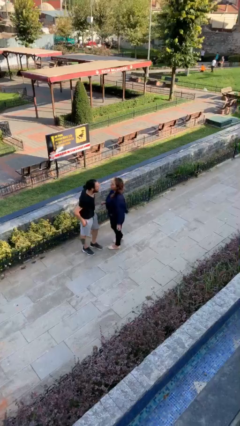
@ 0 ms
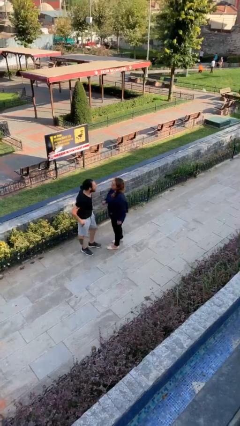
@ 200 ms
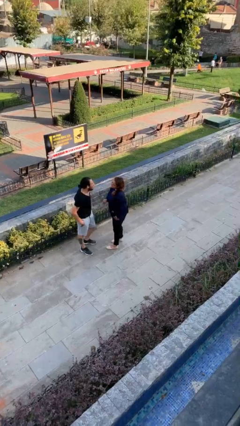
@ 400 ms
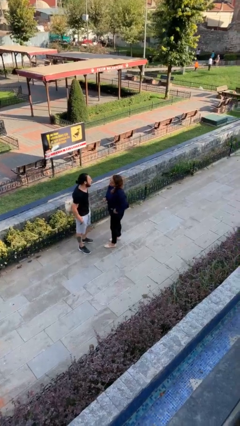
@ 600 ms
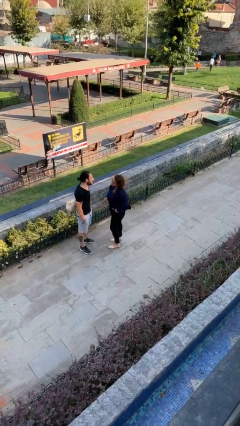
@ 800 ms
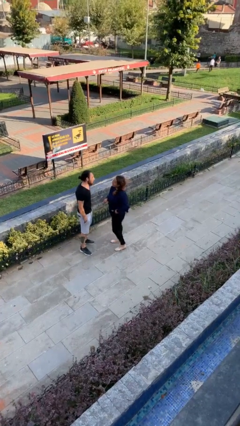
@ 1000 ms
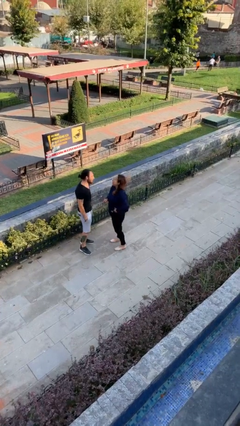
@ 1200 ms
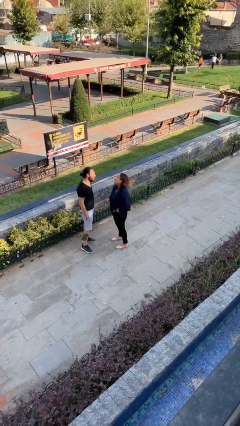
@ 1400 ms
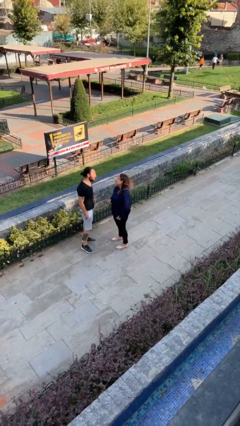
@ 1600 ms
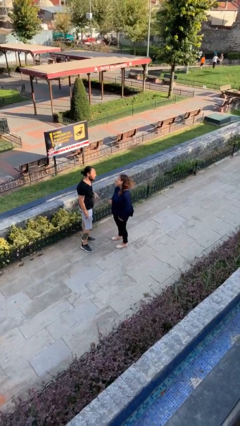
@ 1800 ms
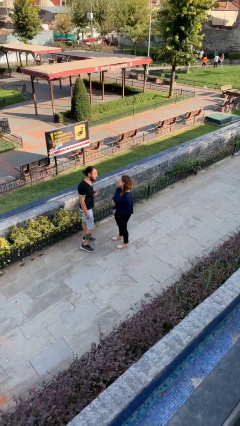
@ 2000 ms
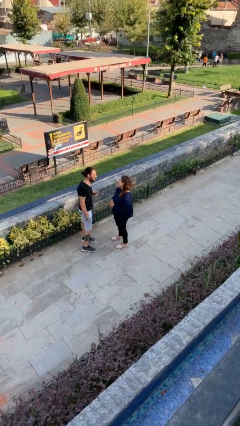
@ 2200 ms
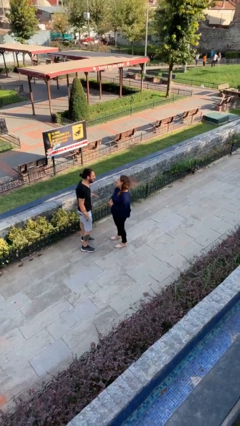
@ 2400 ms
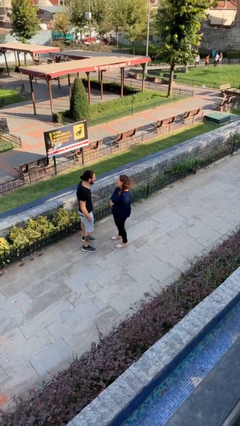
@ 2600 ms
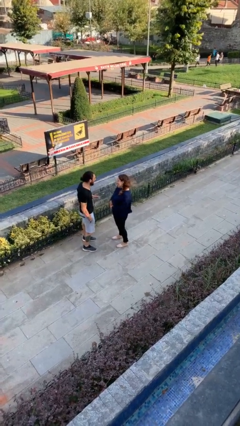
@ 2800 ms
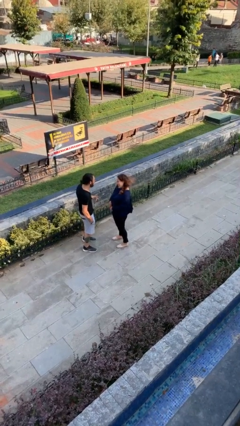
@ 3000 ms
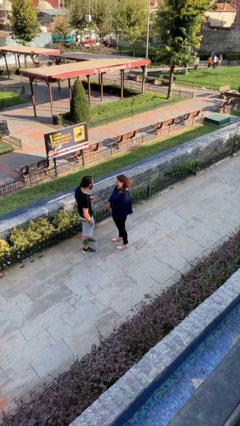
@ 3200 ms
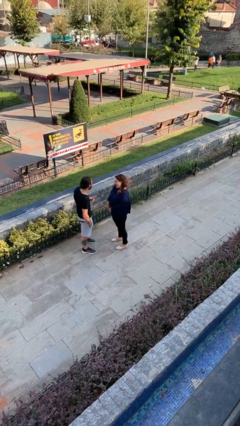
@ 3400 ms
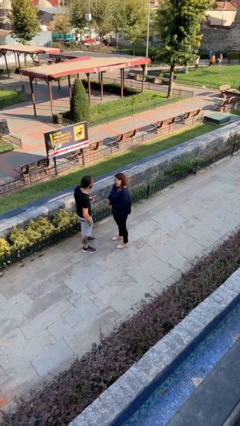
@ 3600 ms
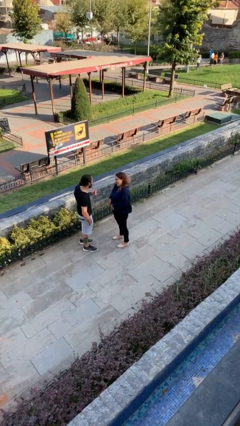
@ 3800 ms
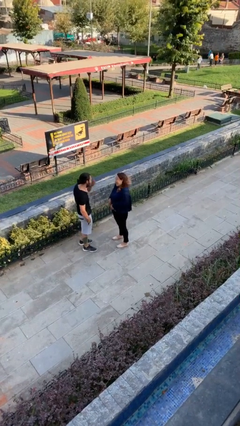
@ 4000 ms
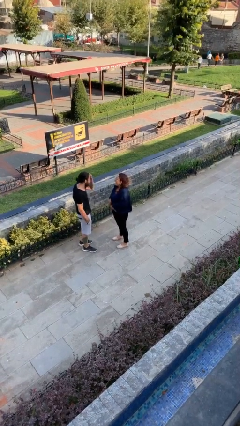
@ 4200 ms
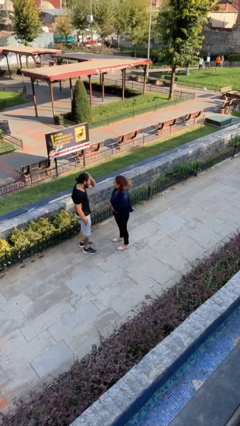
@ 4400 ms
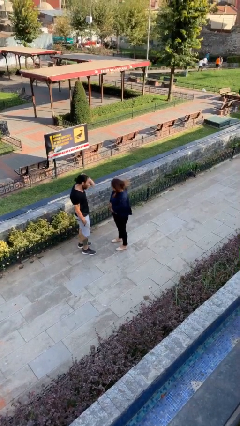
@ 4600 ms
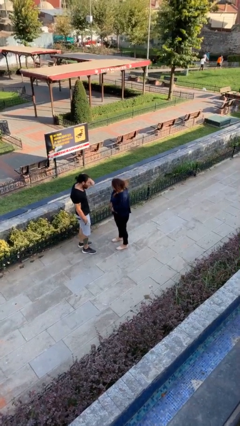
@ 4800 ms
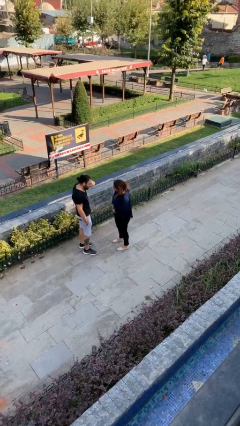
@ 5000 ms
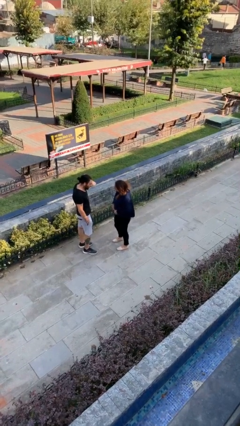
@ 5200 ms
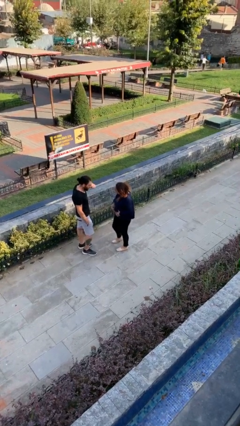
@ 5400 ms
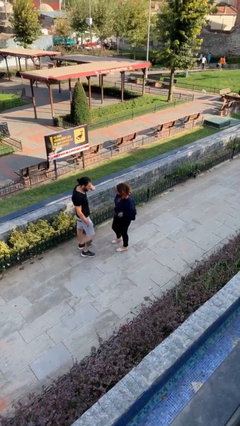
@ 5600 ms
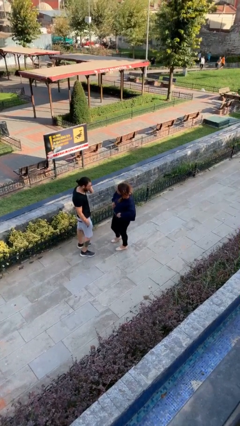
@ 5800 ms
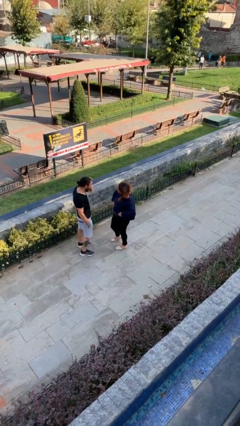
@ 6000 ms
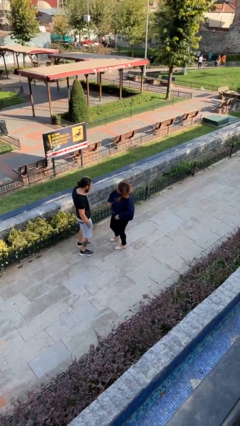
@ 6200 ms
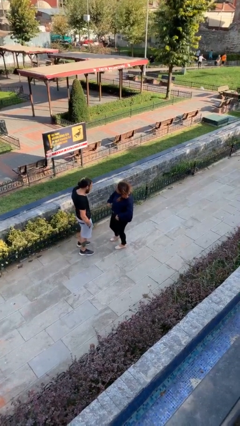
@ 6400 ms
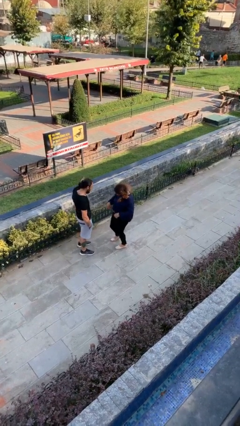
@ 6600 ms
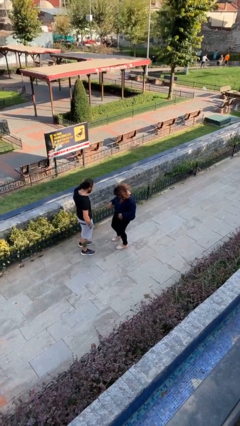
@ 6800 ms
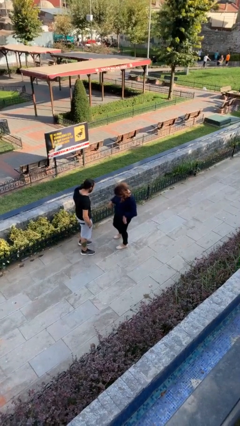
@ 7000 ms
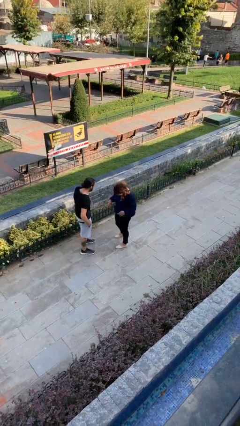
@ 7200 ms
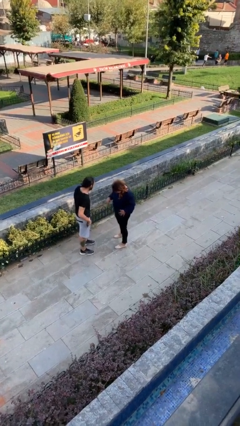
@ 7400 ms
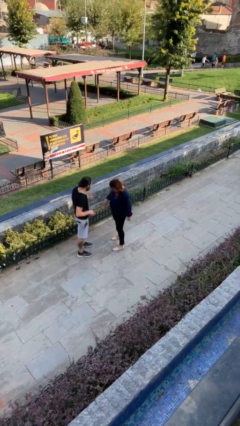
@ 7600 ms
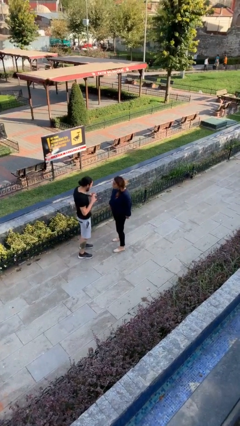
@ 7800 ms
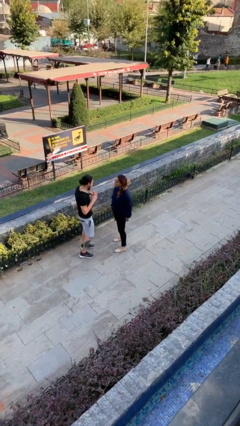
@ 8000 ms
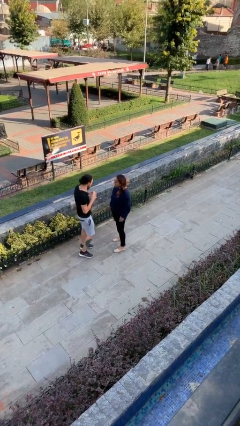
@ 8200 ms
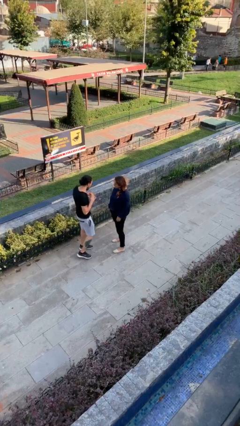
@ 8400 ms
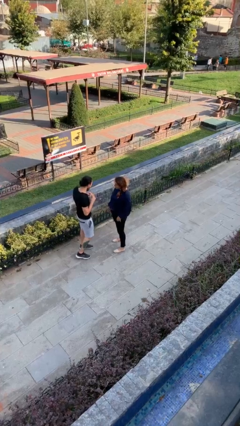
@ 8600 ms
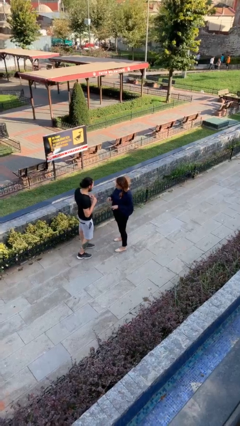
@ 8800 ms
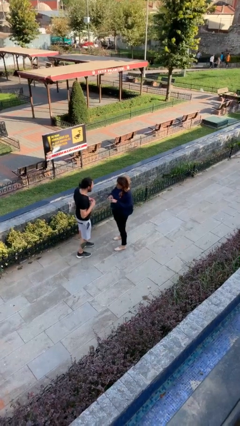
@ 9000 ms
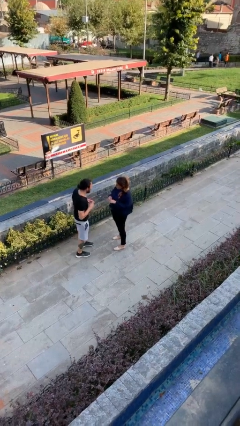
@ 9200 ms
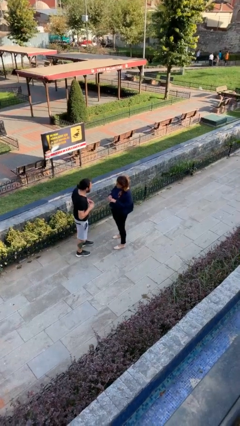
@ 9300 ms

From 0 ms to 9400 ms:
person talks to person

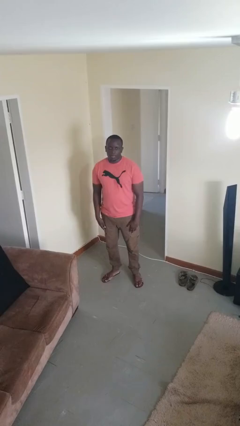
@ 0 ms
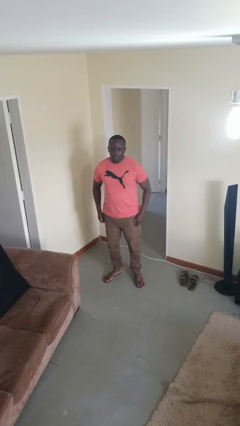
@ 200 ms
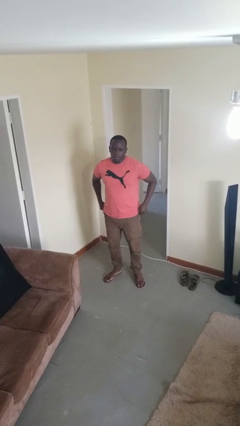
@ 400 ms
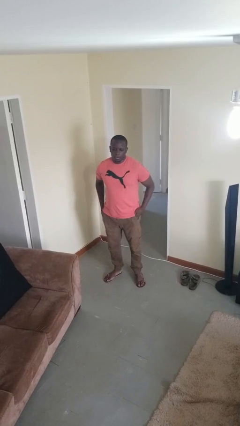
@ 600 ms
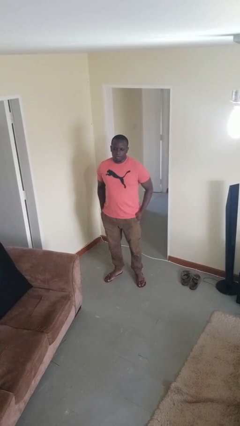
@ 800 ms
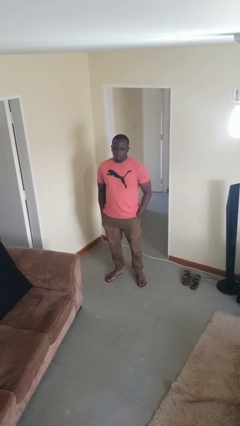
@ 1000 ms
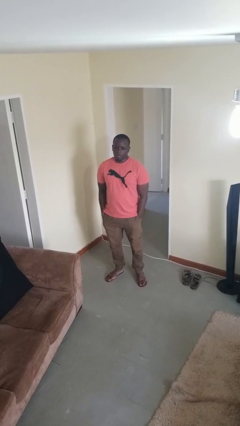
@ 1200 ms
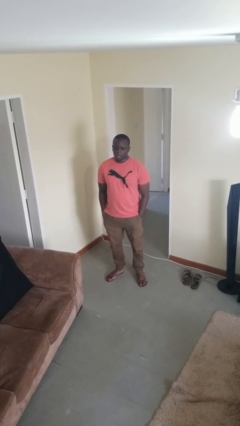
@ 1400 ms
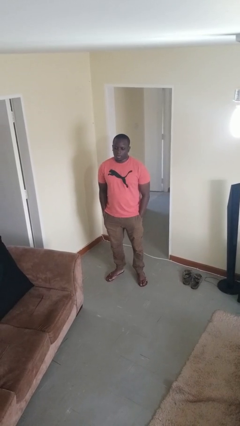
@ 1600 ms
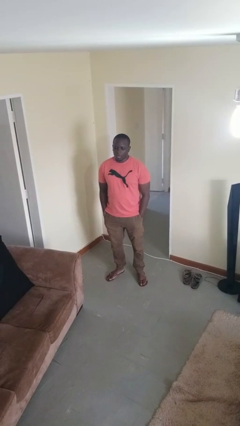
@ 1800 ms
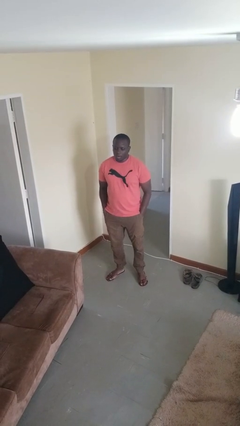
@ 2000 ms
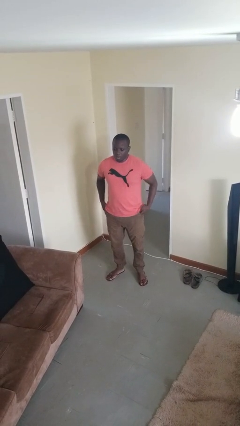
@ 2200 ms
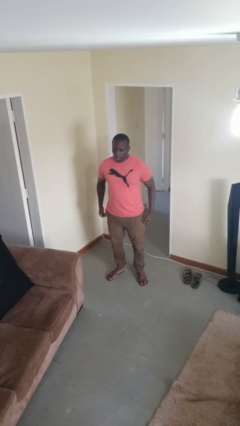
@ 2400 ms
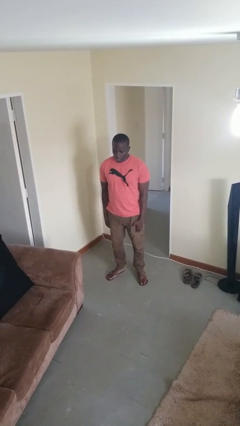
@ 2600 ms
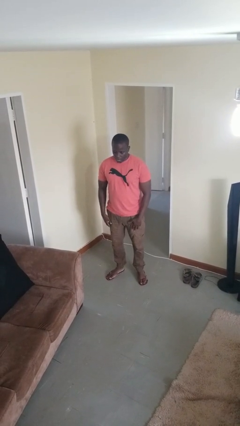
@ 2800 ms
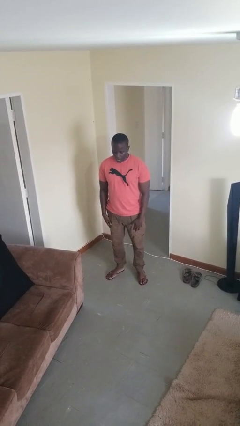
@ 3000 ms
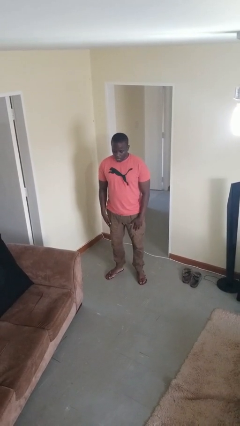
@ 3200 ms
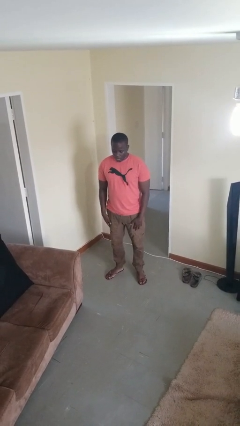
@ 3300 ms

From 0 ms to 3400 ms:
person puts hands in back pockets

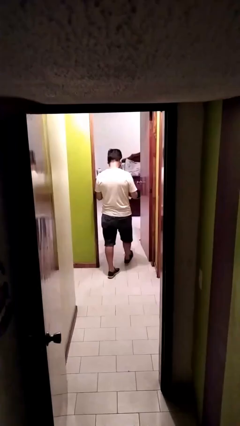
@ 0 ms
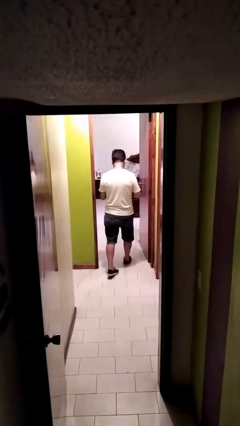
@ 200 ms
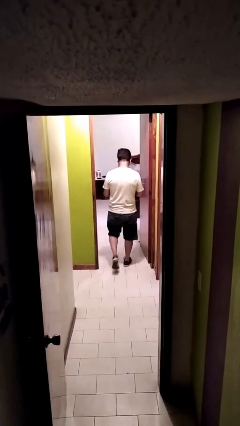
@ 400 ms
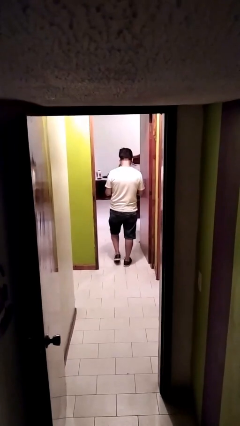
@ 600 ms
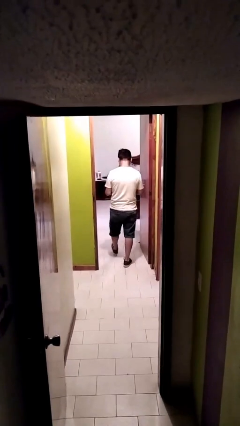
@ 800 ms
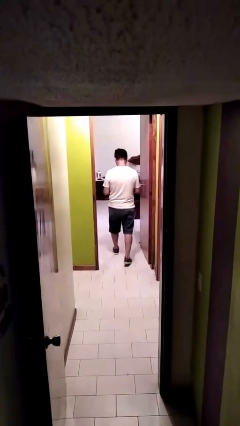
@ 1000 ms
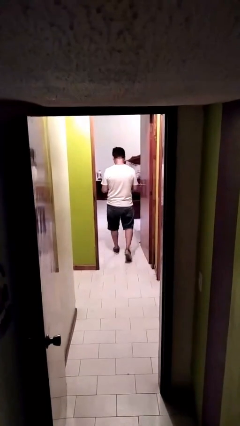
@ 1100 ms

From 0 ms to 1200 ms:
person exits scene through structure

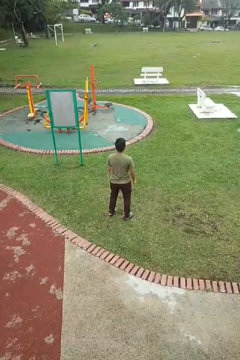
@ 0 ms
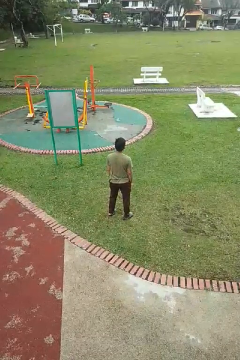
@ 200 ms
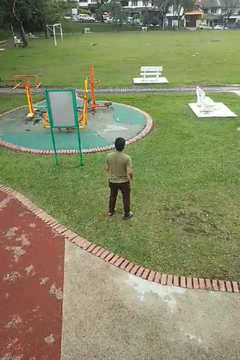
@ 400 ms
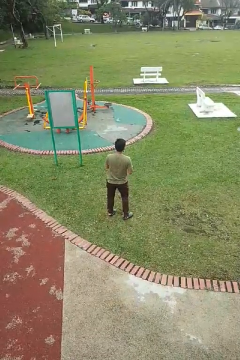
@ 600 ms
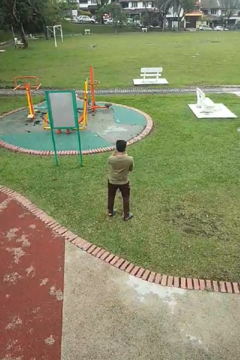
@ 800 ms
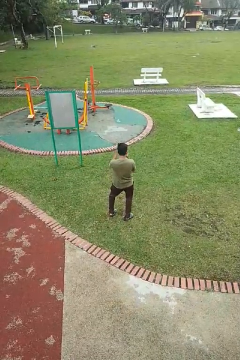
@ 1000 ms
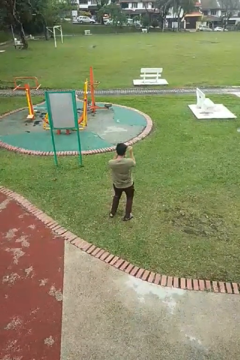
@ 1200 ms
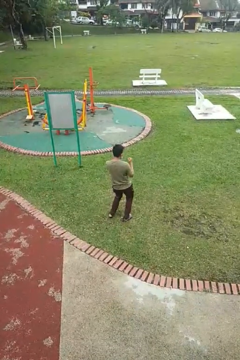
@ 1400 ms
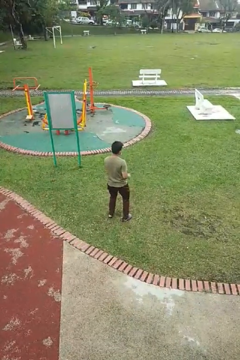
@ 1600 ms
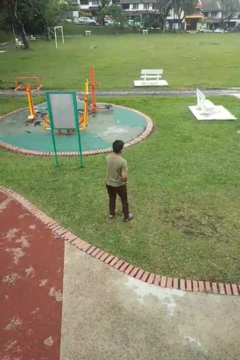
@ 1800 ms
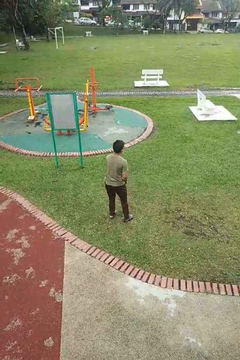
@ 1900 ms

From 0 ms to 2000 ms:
person dances in place

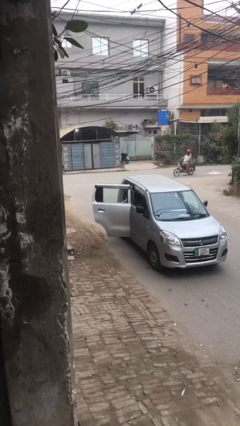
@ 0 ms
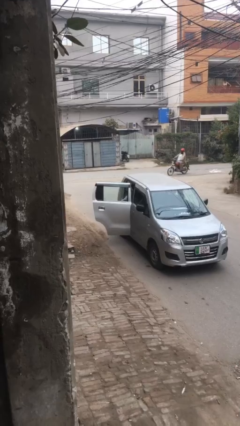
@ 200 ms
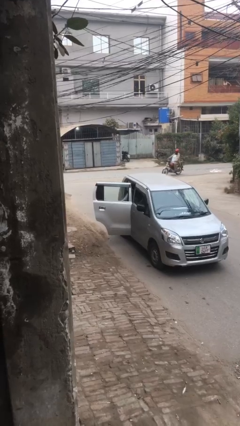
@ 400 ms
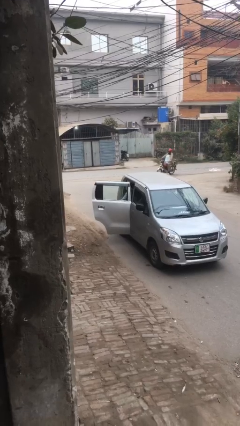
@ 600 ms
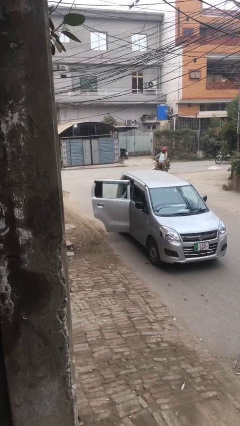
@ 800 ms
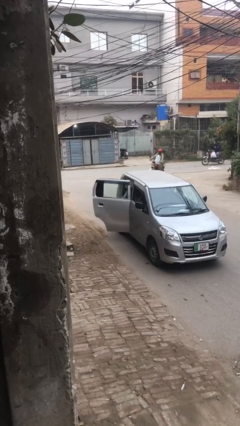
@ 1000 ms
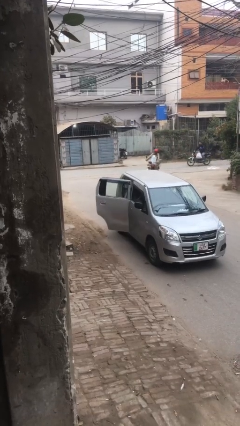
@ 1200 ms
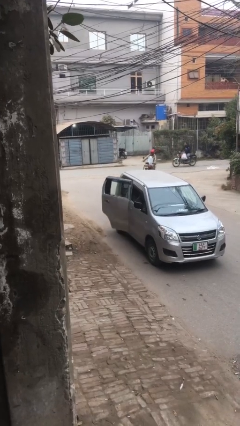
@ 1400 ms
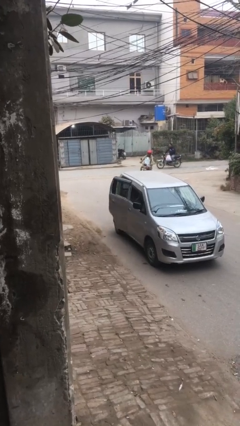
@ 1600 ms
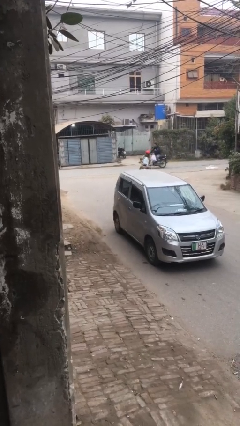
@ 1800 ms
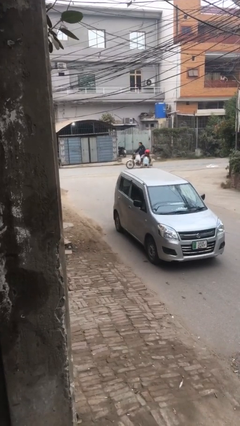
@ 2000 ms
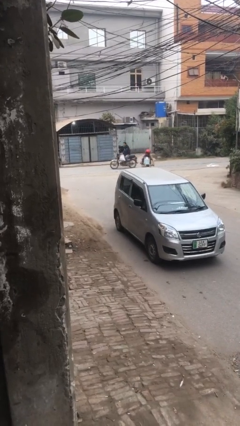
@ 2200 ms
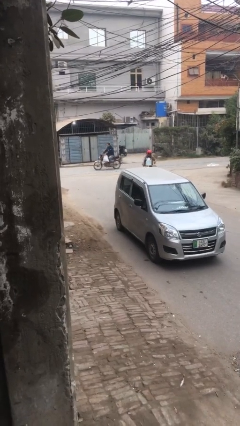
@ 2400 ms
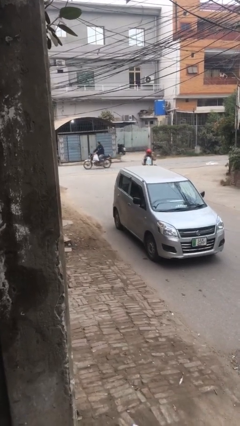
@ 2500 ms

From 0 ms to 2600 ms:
person closes car door
